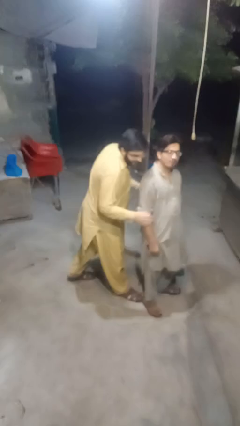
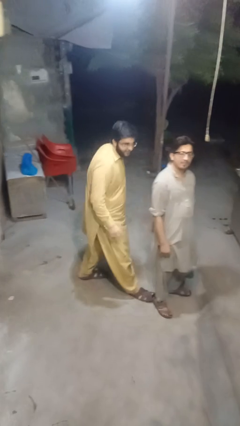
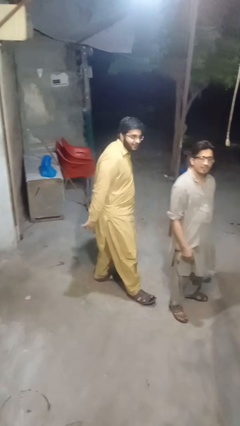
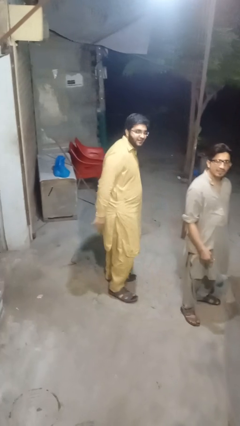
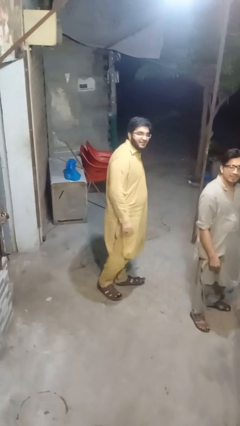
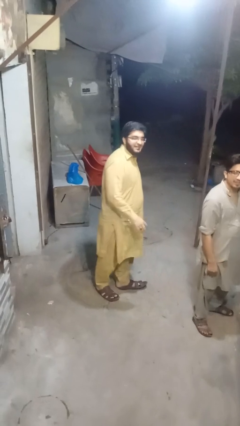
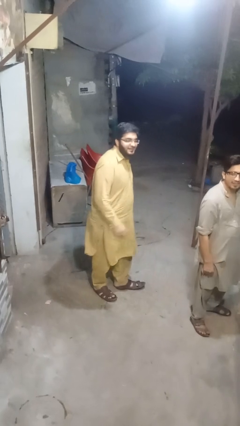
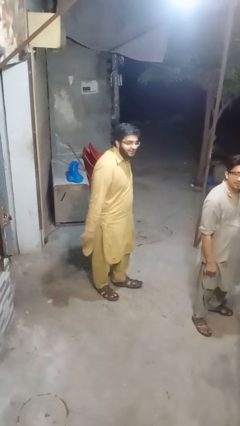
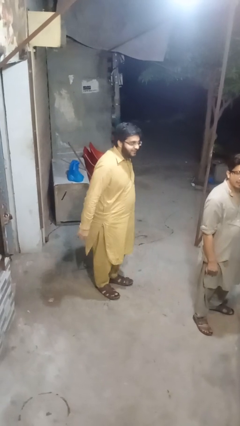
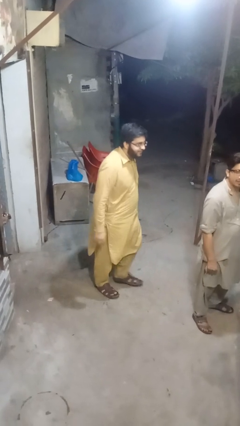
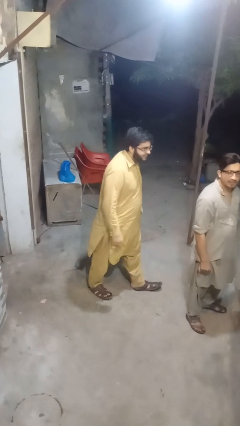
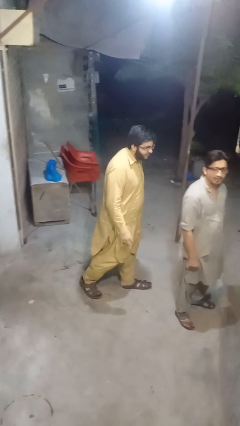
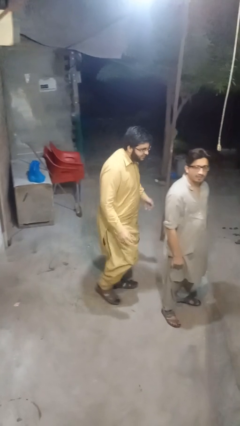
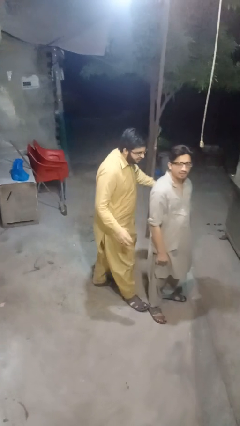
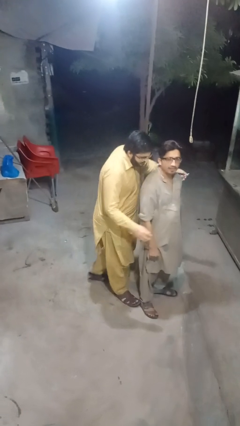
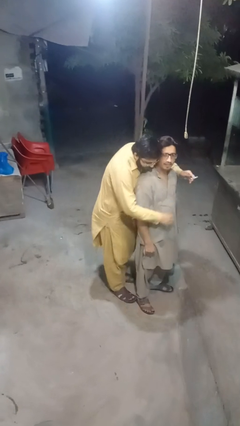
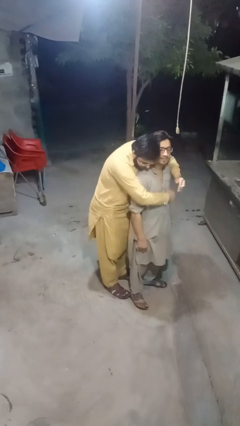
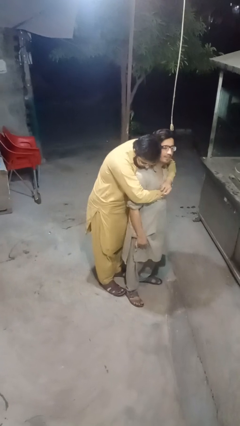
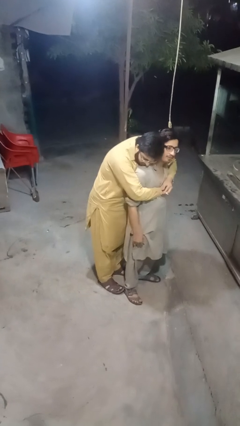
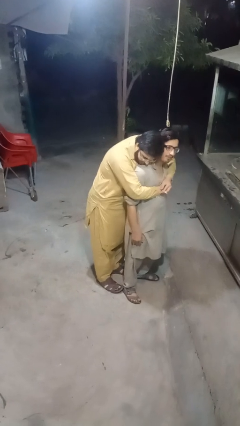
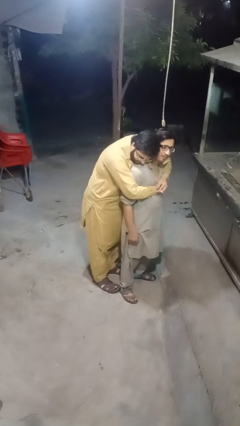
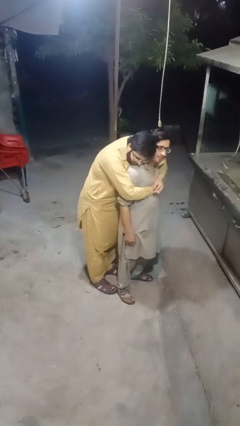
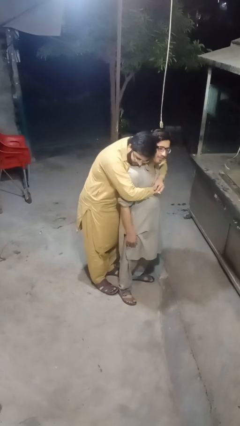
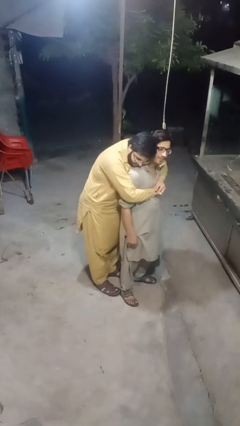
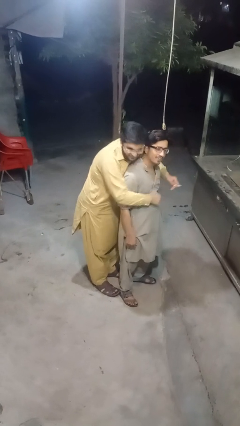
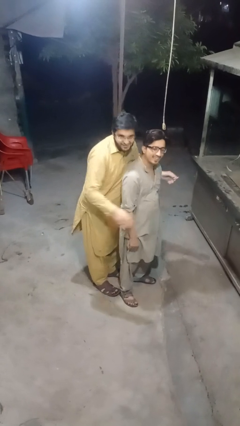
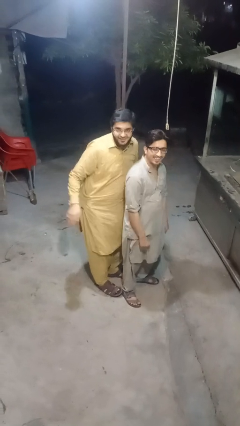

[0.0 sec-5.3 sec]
person hugs person from behind

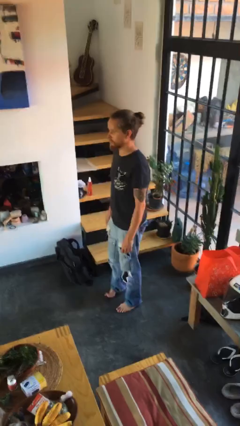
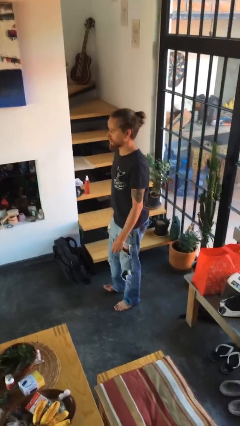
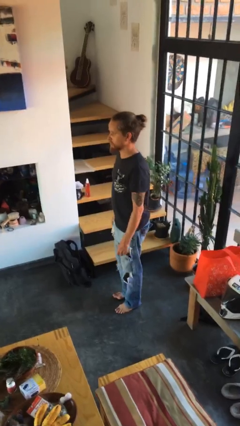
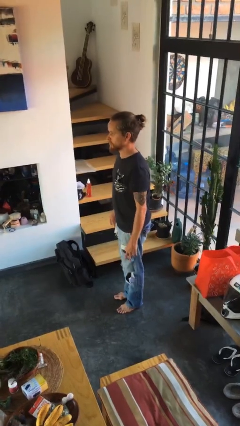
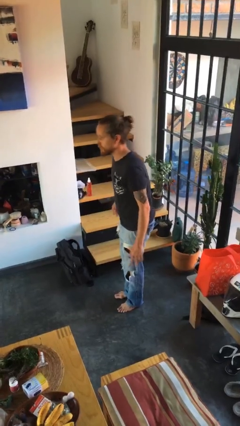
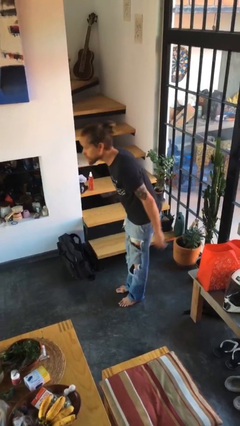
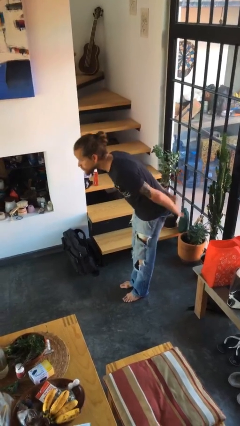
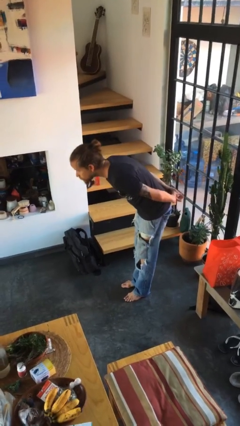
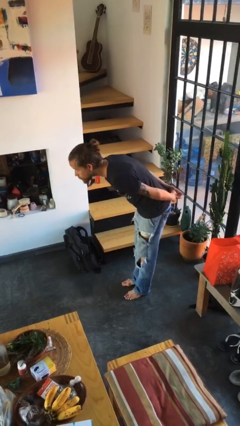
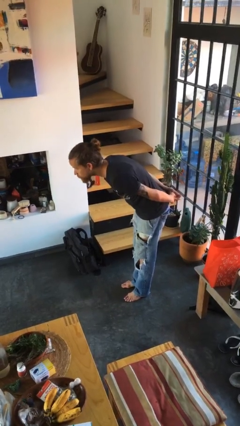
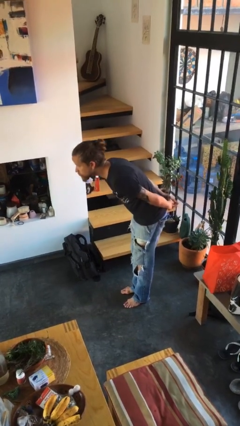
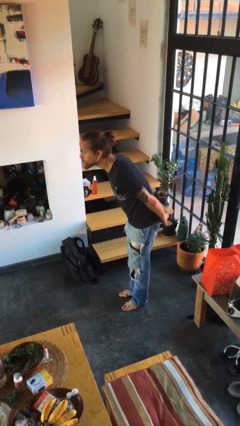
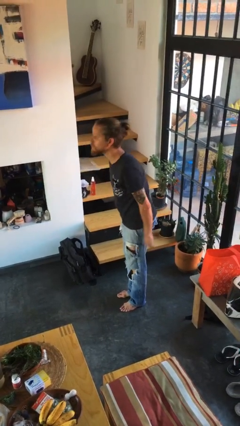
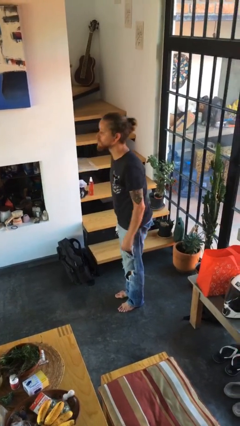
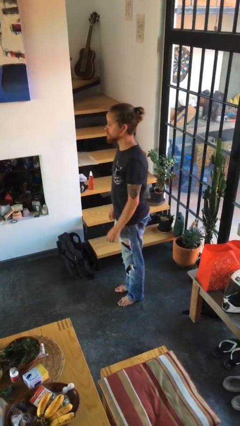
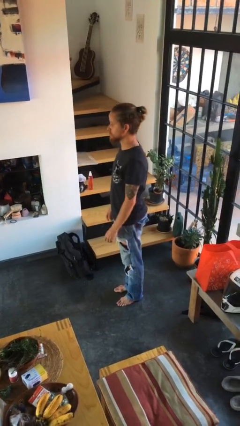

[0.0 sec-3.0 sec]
person bows

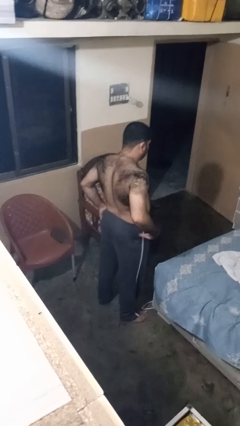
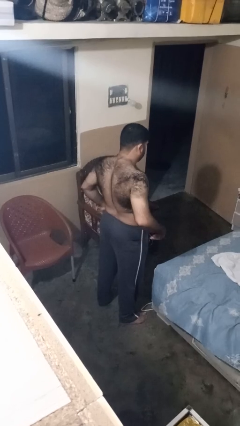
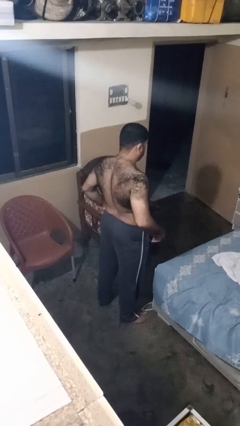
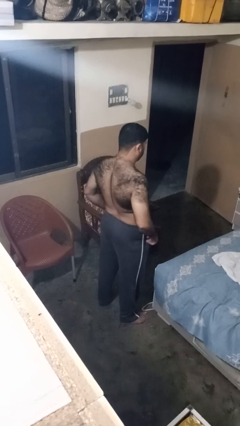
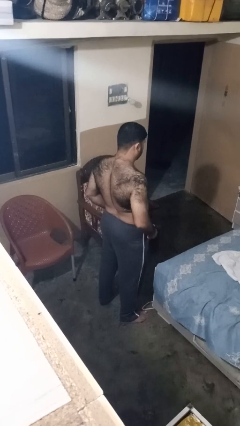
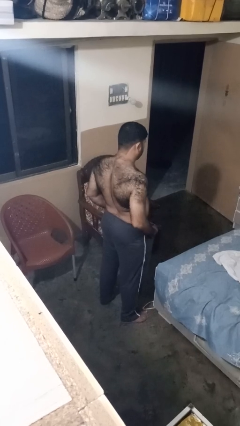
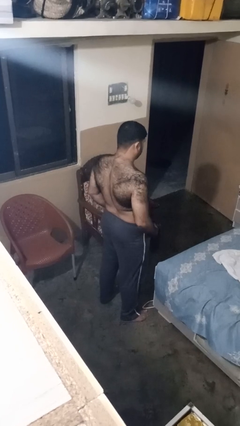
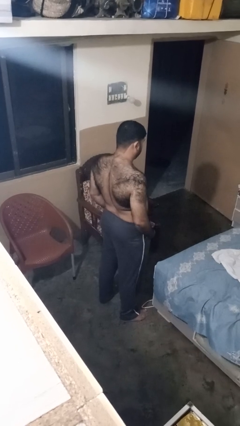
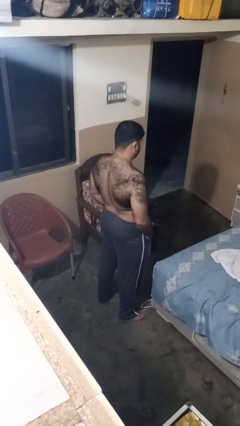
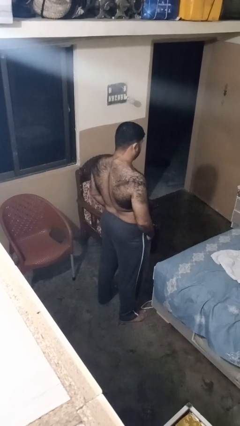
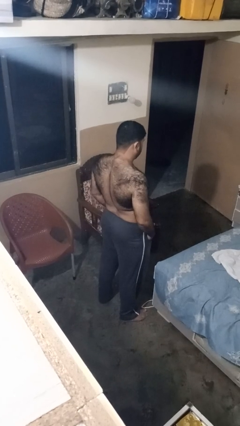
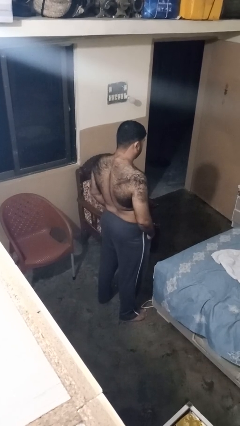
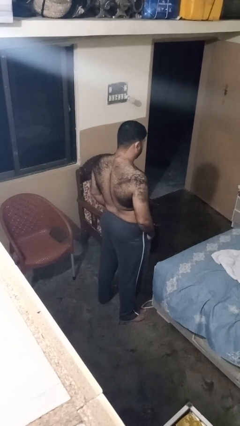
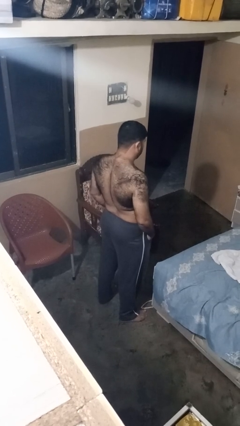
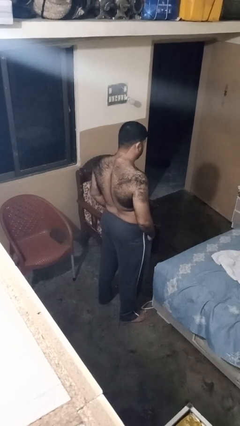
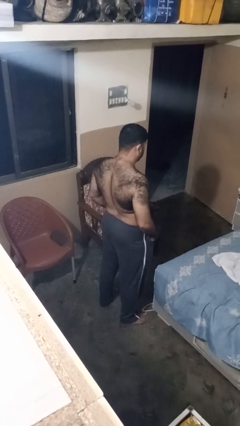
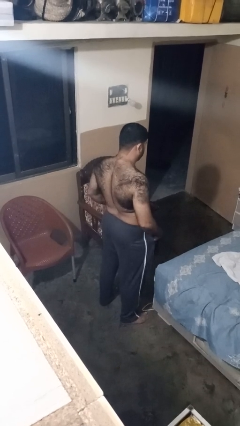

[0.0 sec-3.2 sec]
person puts hands in back pockets

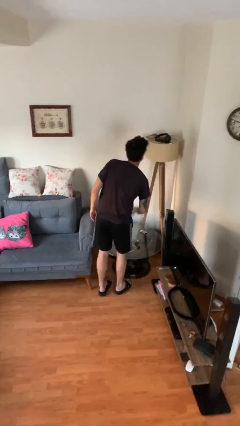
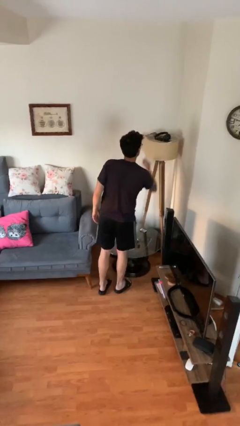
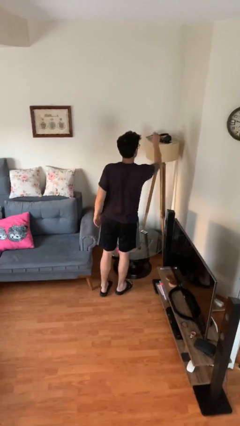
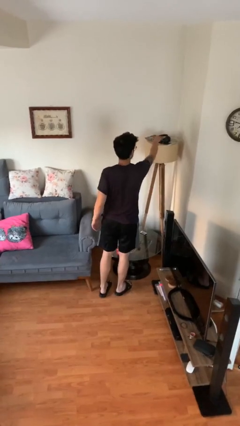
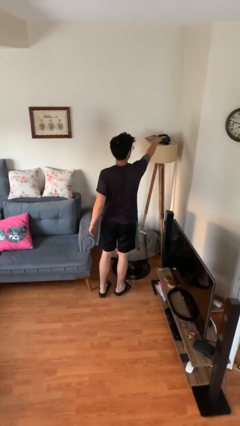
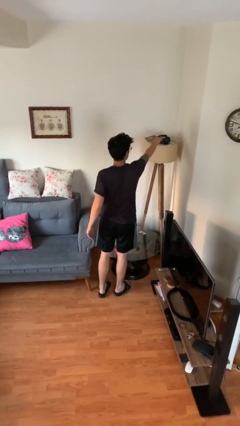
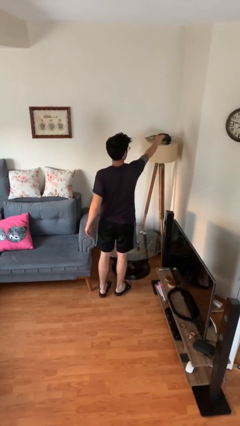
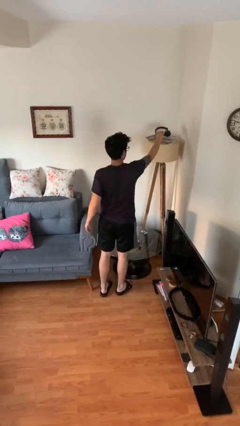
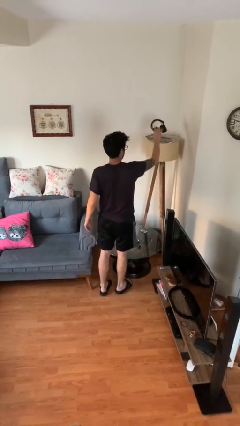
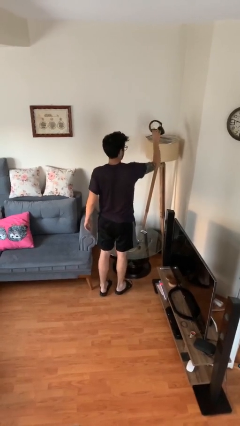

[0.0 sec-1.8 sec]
person picks up object from shelf

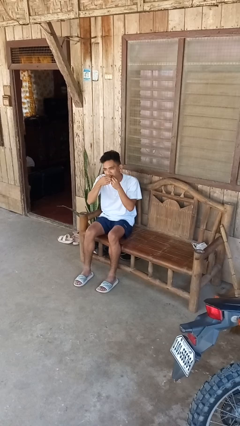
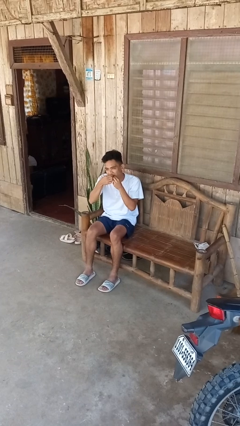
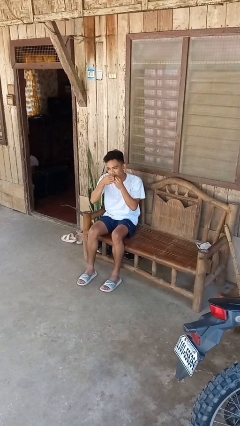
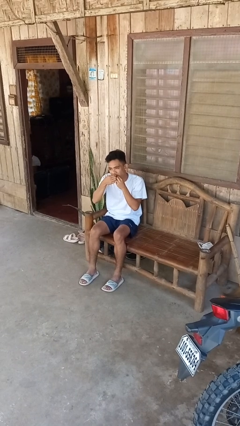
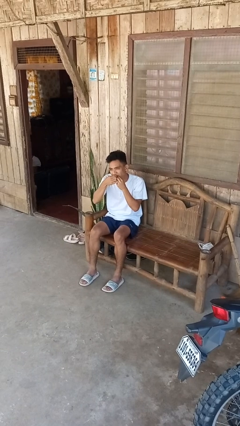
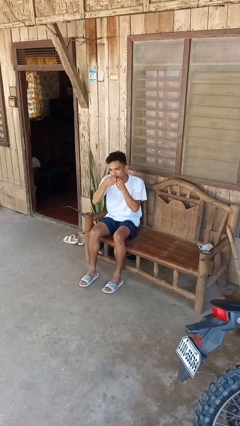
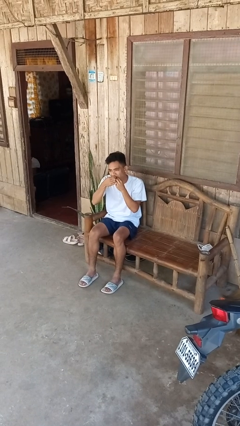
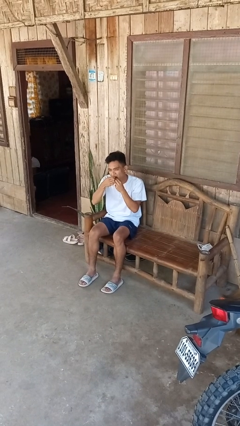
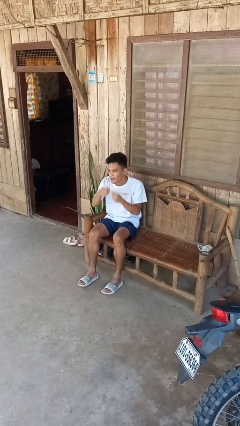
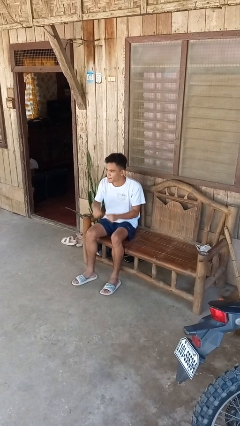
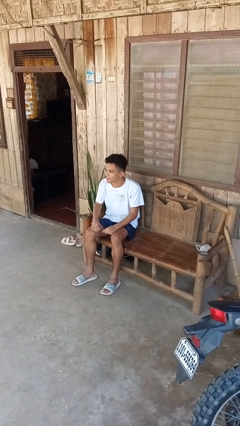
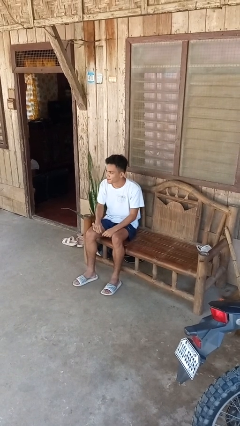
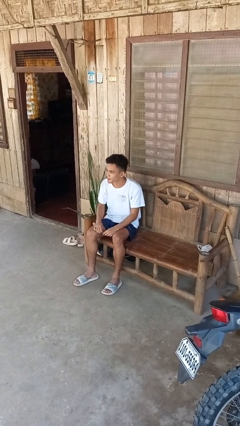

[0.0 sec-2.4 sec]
person flosses

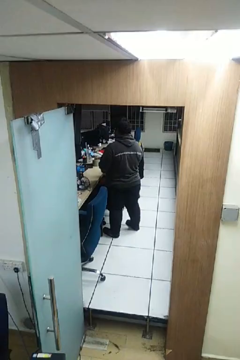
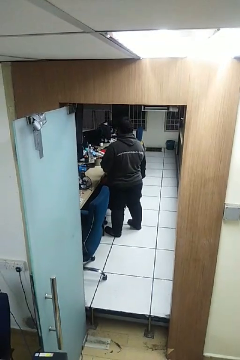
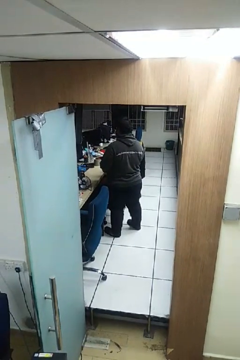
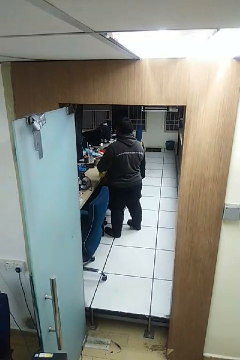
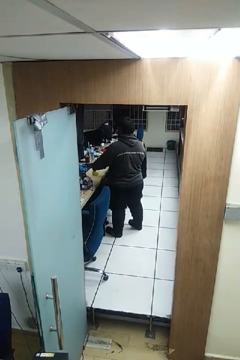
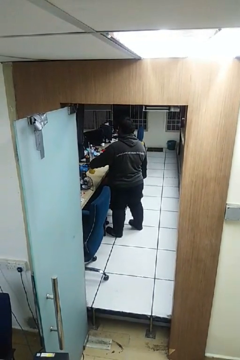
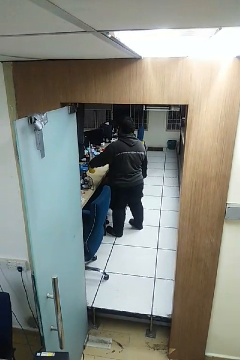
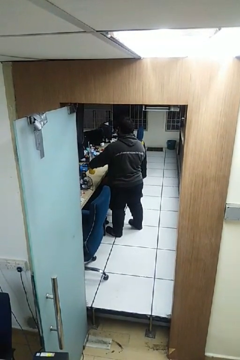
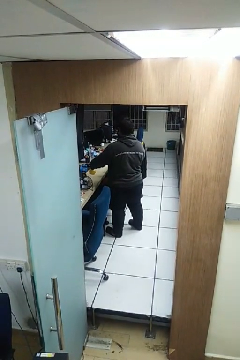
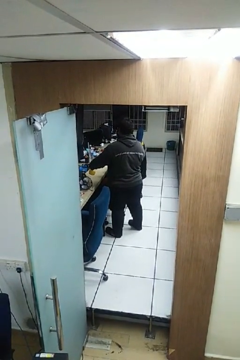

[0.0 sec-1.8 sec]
person sprays from bottle

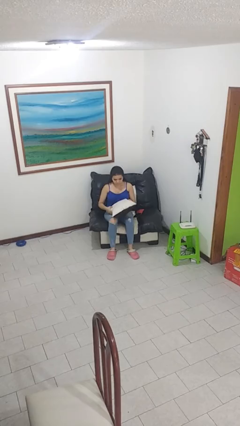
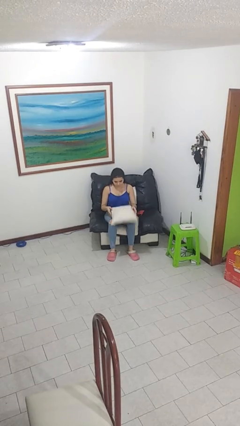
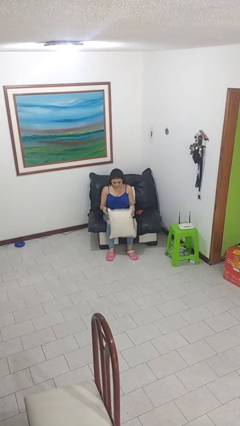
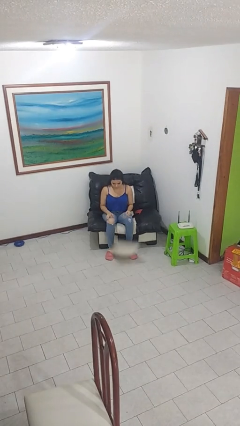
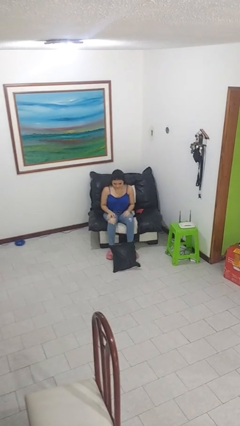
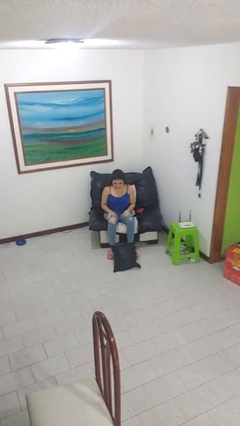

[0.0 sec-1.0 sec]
person drops object
